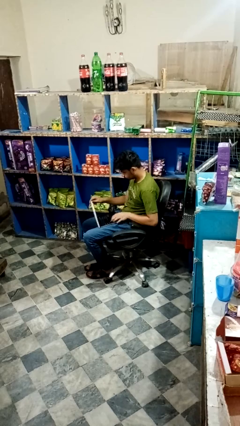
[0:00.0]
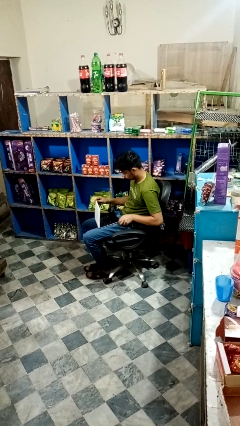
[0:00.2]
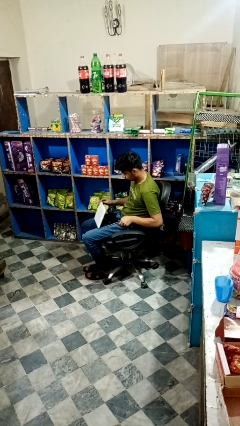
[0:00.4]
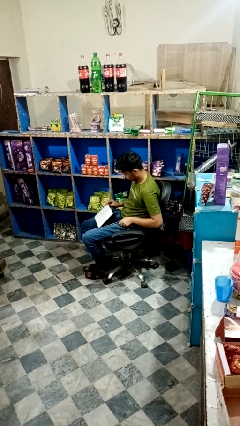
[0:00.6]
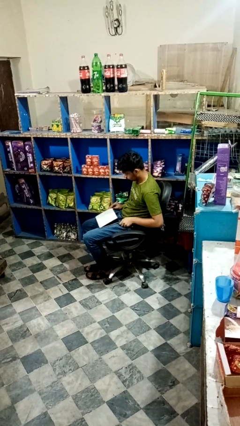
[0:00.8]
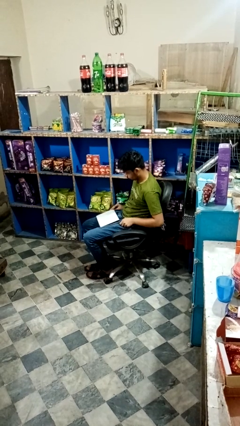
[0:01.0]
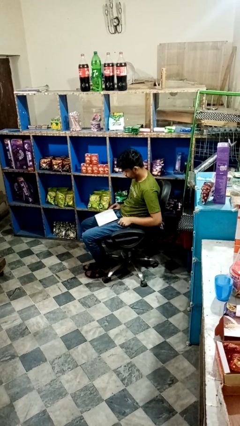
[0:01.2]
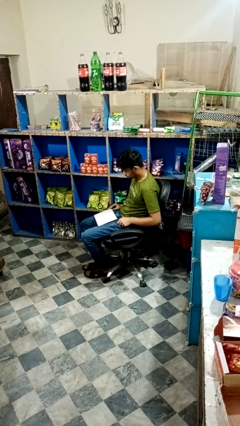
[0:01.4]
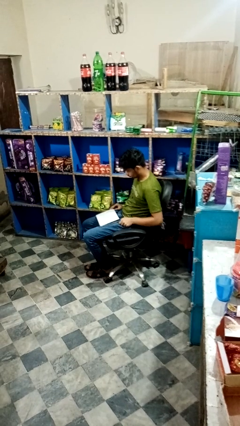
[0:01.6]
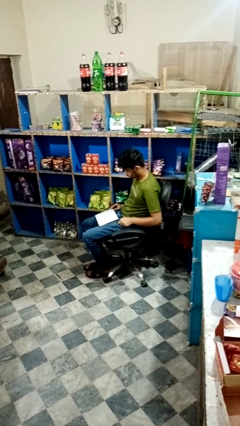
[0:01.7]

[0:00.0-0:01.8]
person closes laptop

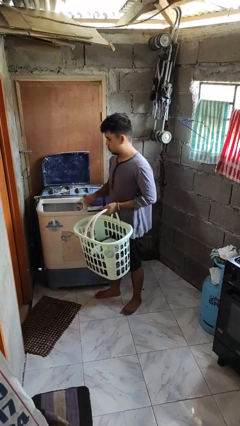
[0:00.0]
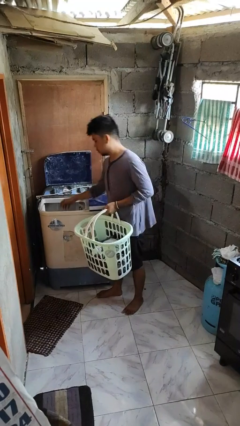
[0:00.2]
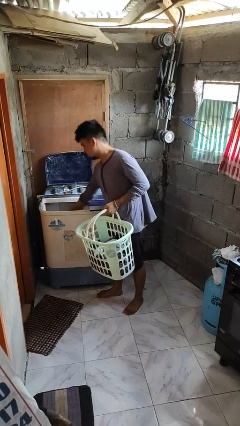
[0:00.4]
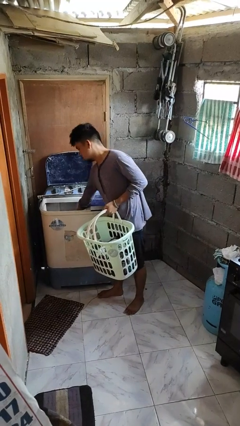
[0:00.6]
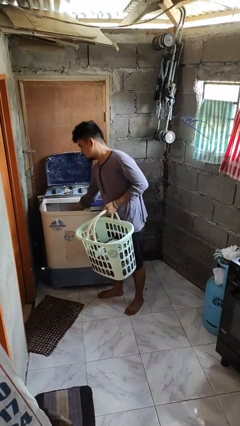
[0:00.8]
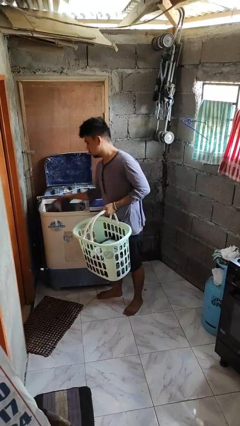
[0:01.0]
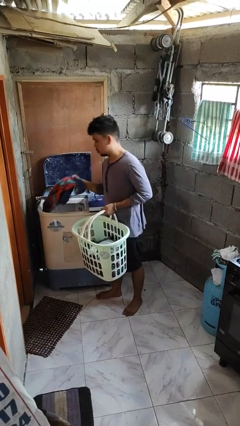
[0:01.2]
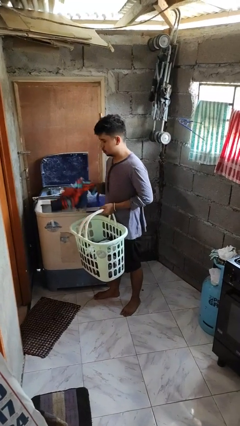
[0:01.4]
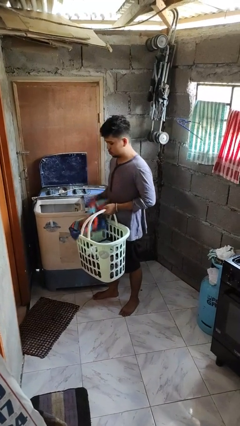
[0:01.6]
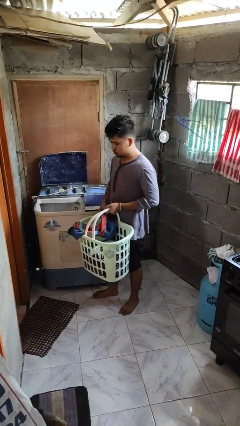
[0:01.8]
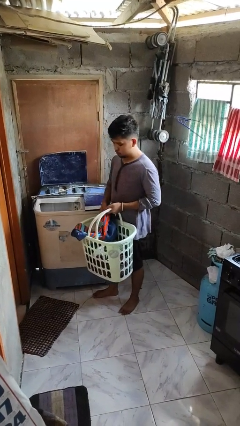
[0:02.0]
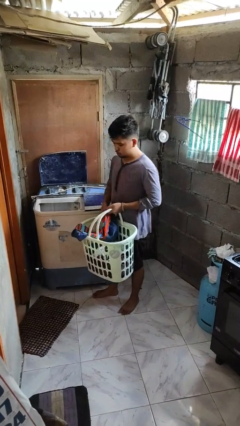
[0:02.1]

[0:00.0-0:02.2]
person unloads clotheswasher

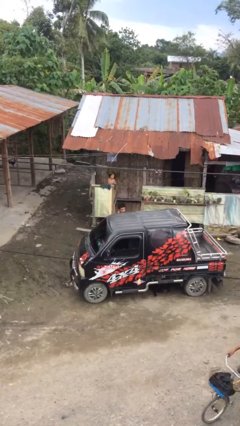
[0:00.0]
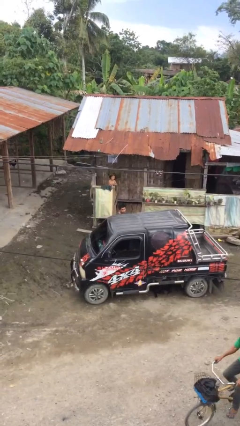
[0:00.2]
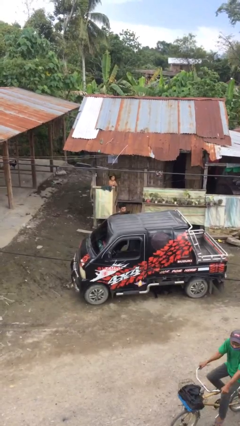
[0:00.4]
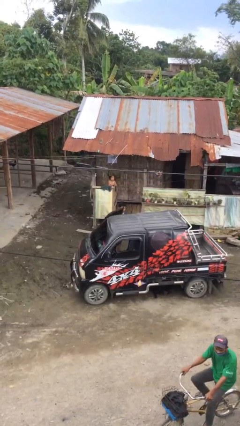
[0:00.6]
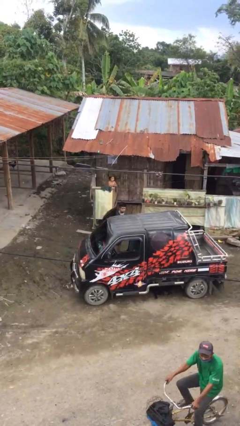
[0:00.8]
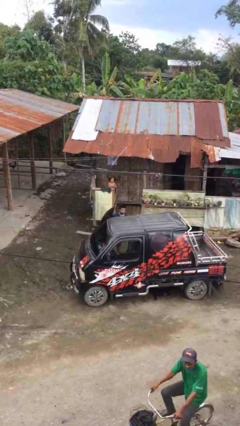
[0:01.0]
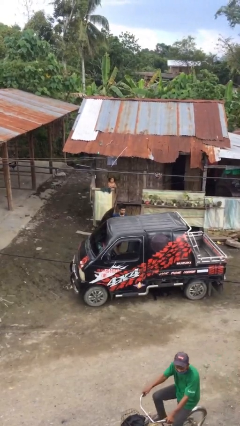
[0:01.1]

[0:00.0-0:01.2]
person opens car door

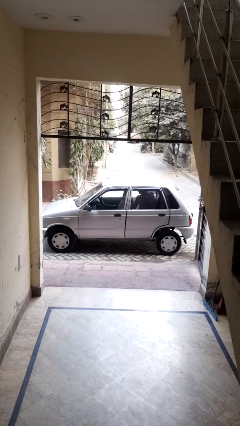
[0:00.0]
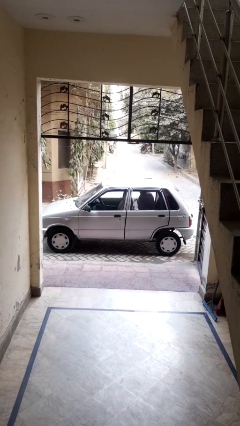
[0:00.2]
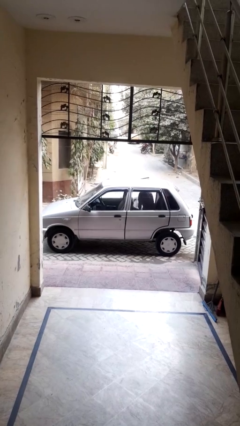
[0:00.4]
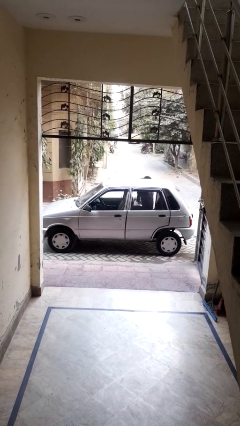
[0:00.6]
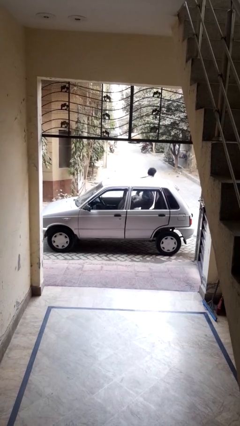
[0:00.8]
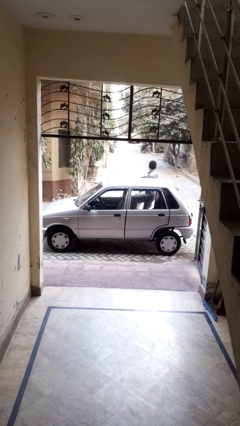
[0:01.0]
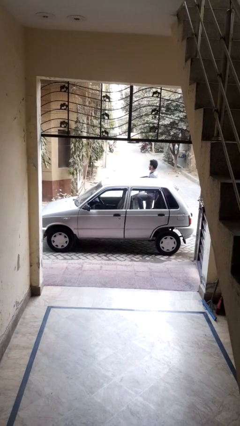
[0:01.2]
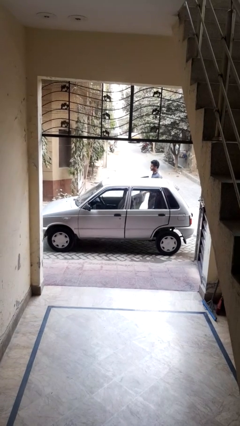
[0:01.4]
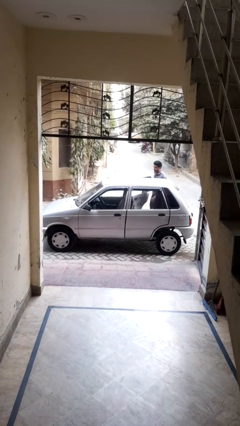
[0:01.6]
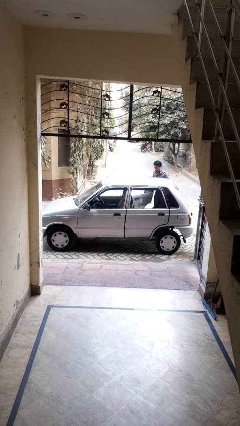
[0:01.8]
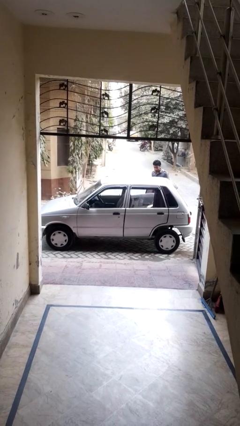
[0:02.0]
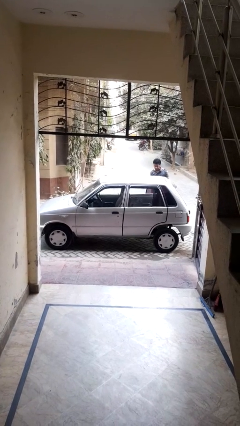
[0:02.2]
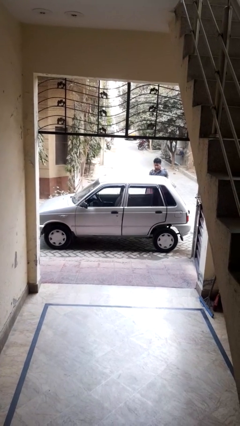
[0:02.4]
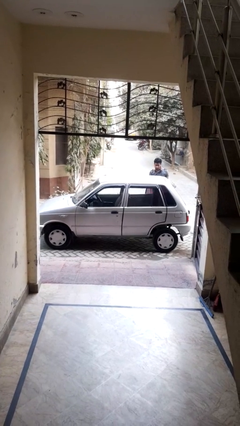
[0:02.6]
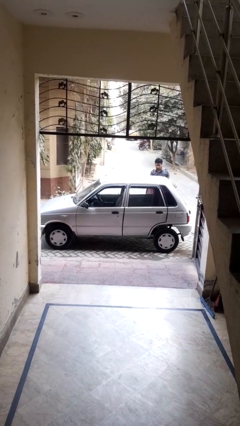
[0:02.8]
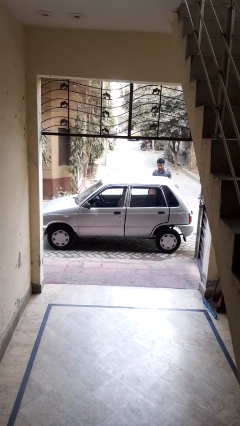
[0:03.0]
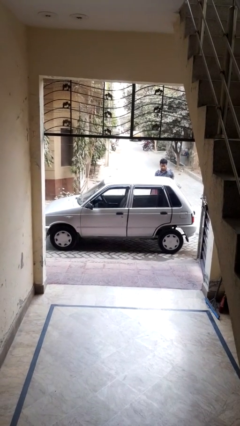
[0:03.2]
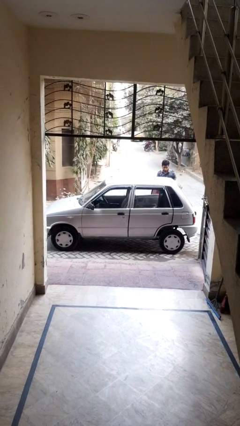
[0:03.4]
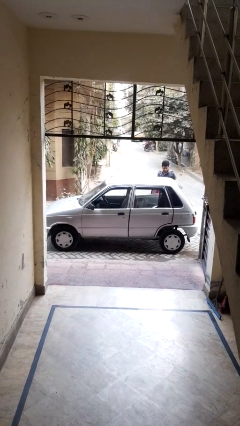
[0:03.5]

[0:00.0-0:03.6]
car drops off person

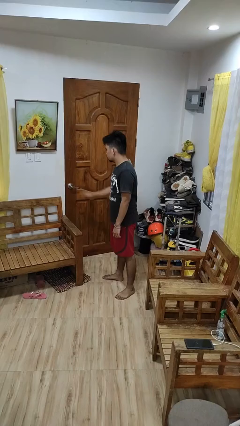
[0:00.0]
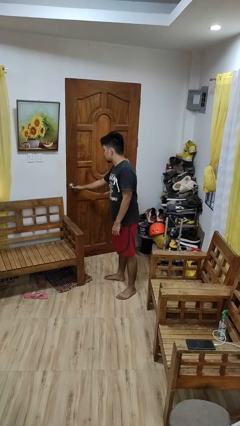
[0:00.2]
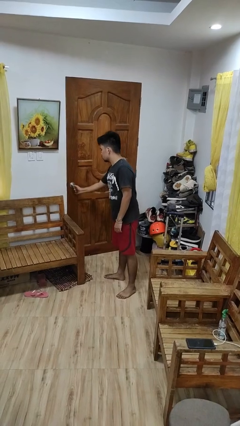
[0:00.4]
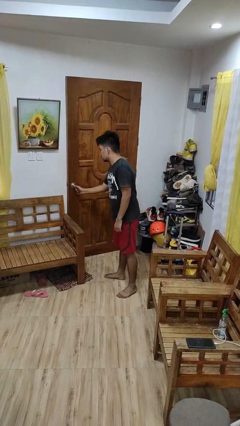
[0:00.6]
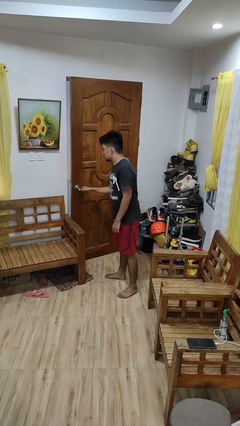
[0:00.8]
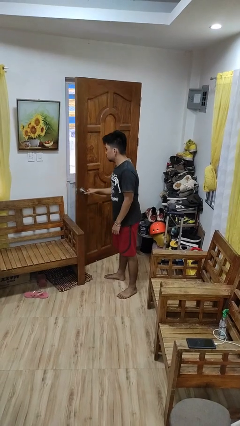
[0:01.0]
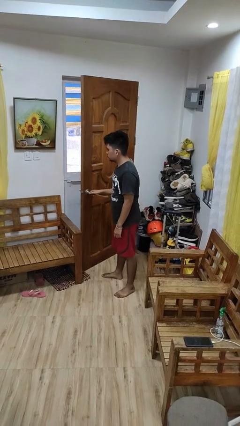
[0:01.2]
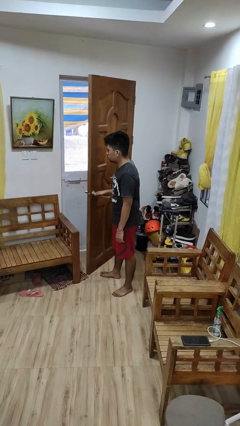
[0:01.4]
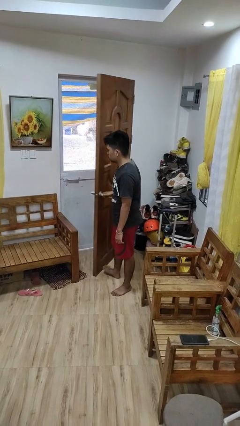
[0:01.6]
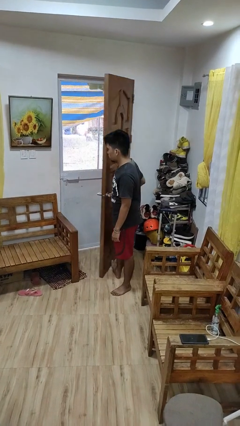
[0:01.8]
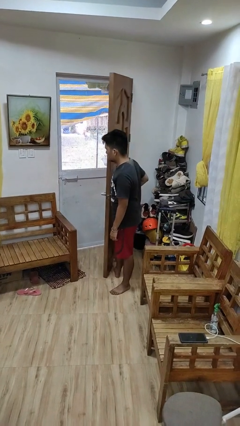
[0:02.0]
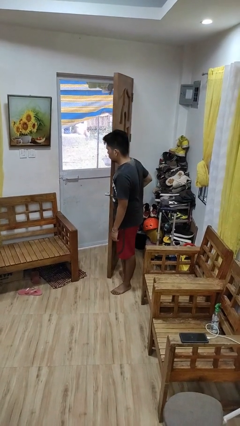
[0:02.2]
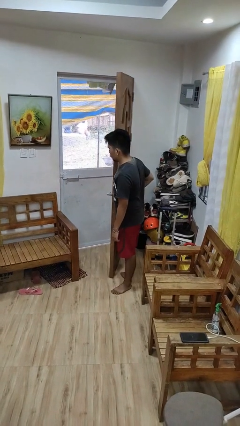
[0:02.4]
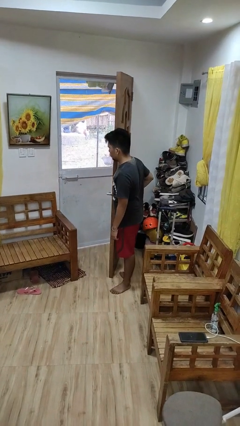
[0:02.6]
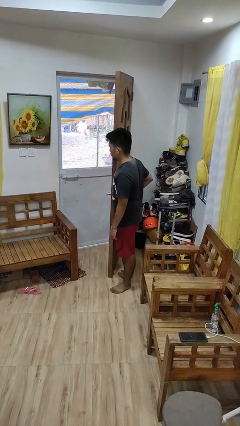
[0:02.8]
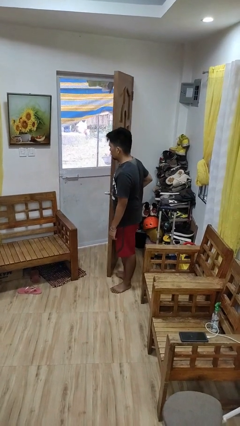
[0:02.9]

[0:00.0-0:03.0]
person opens facility door

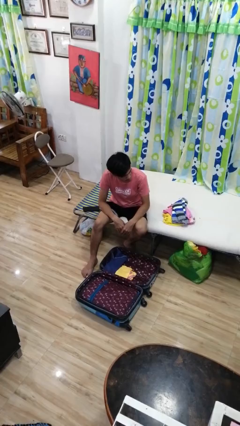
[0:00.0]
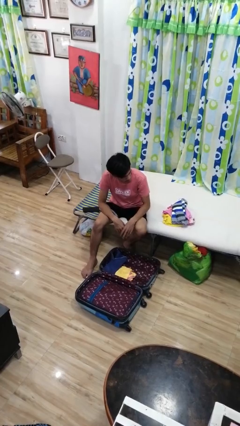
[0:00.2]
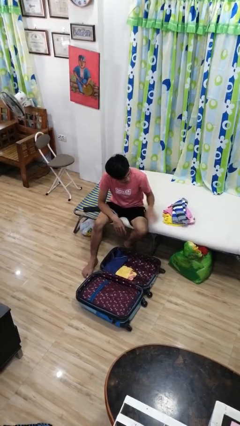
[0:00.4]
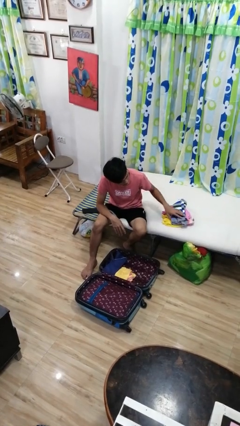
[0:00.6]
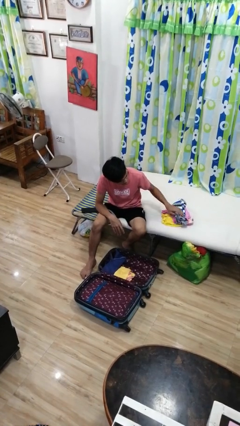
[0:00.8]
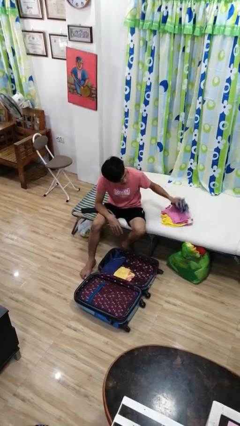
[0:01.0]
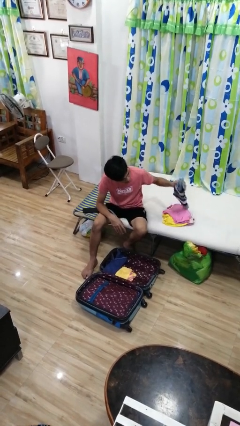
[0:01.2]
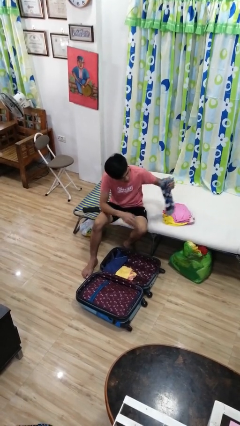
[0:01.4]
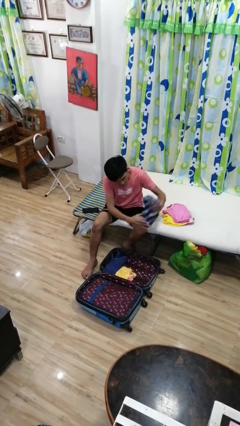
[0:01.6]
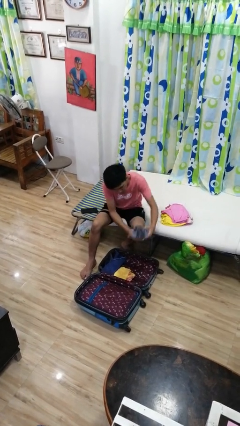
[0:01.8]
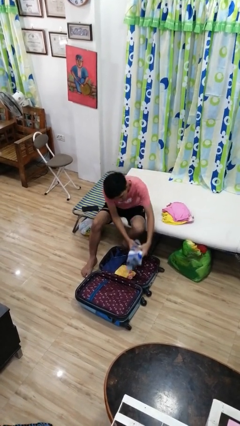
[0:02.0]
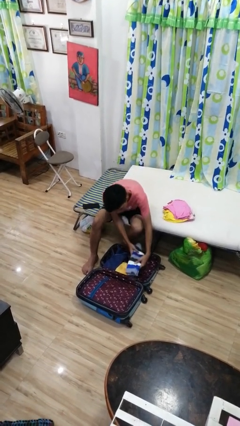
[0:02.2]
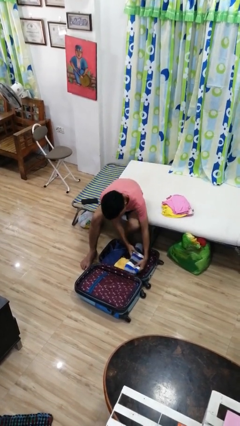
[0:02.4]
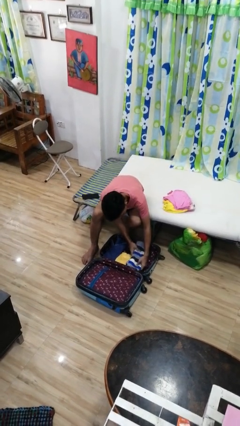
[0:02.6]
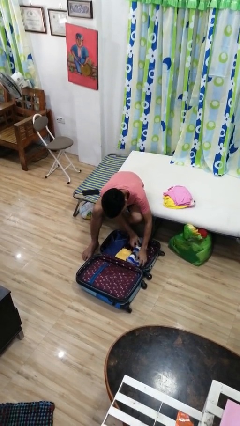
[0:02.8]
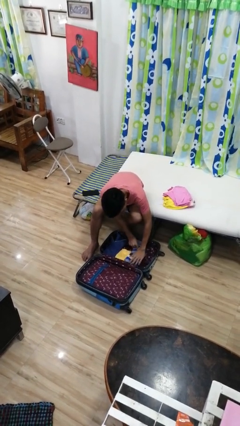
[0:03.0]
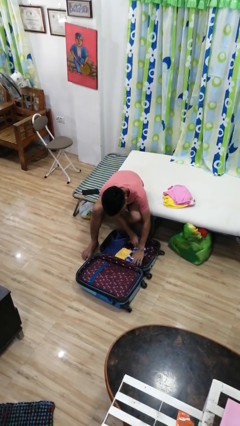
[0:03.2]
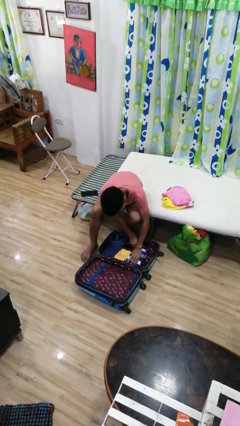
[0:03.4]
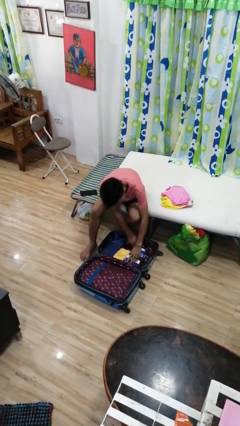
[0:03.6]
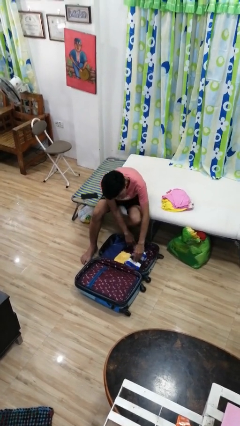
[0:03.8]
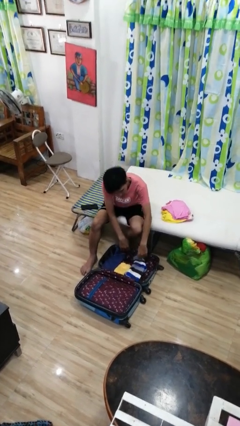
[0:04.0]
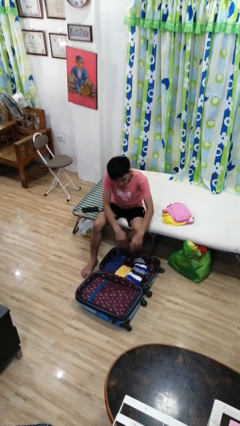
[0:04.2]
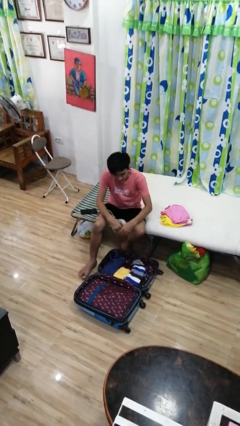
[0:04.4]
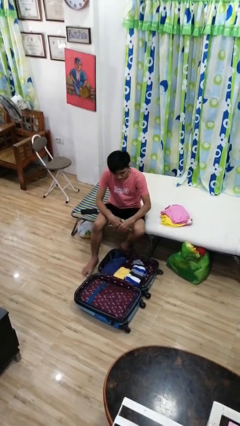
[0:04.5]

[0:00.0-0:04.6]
person loads clothes into suitcase

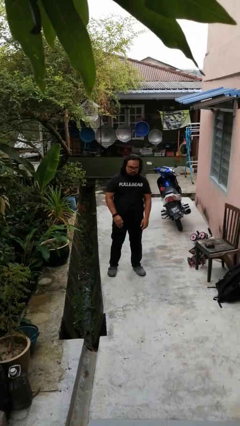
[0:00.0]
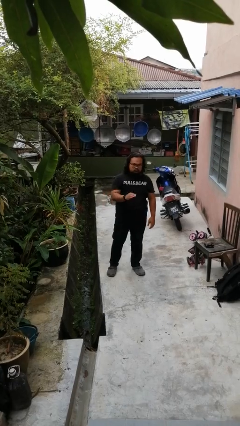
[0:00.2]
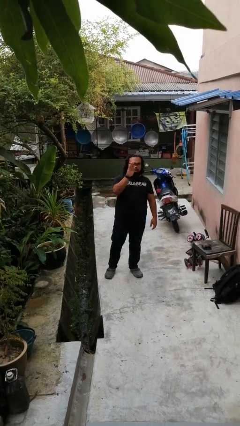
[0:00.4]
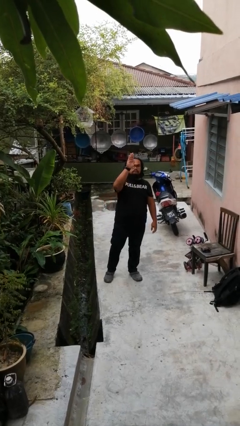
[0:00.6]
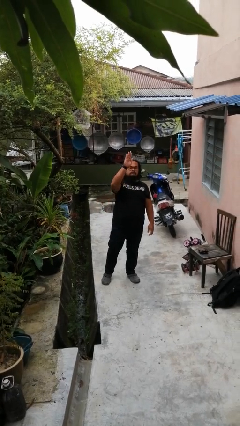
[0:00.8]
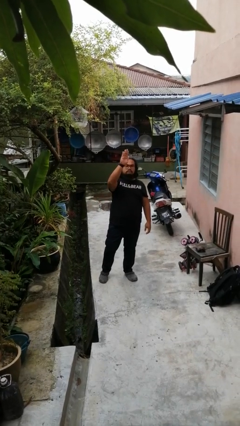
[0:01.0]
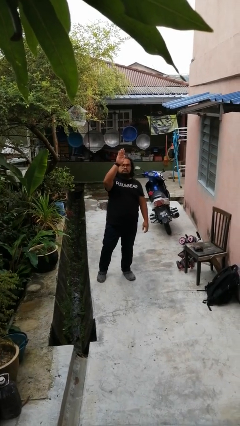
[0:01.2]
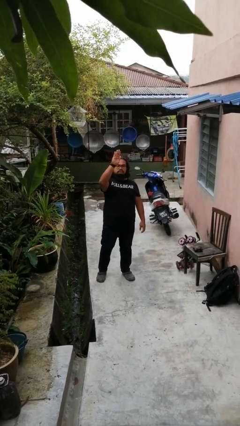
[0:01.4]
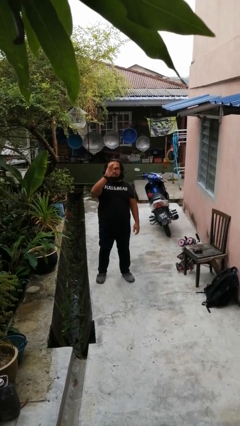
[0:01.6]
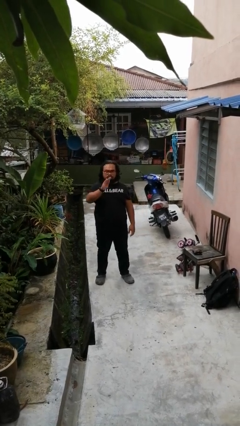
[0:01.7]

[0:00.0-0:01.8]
person gestures raise hand
